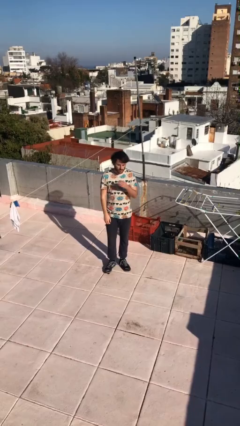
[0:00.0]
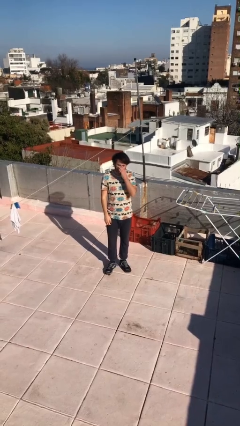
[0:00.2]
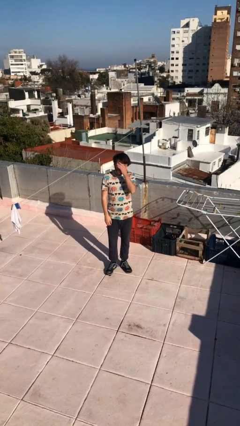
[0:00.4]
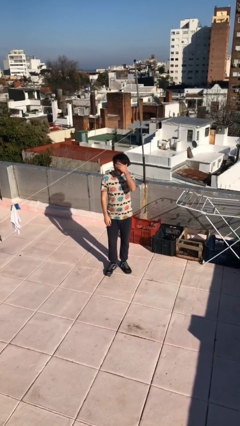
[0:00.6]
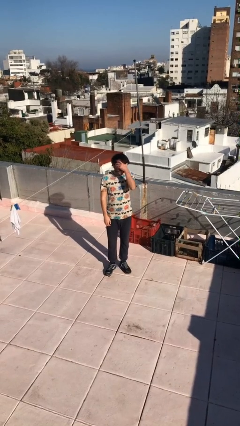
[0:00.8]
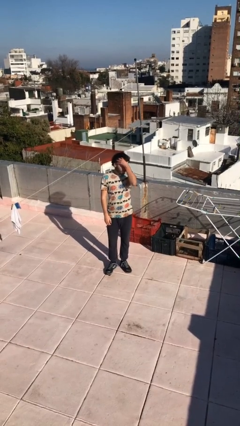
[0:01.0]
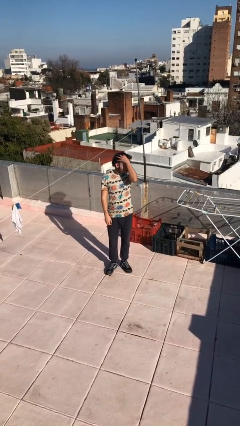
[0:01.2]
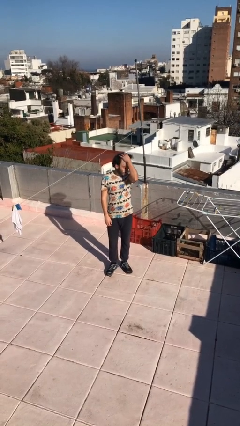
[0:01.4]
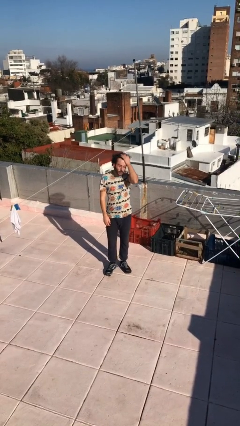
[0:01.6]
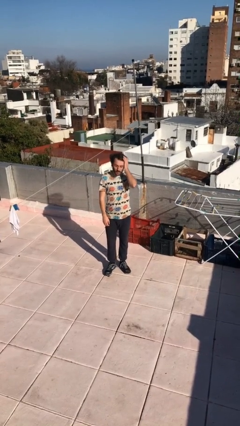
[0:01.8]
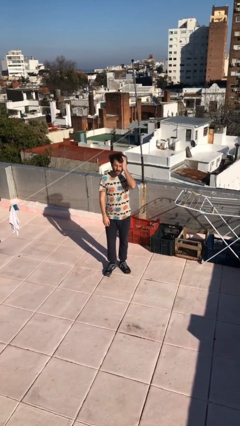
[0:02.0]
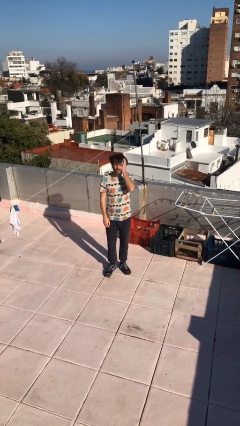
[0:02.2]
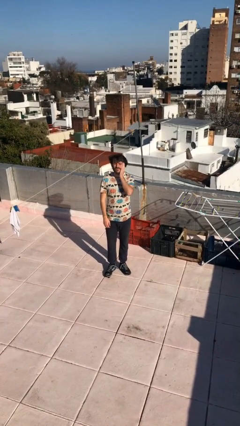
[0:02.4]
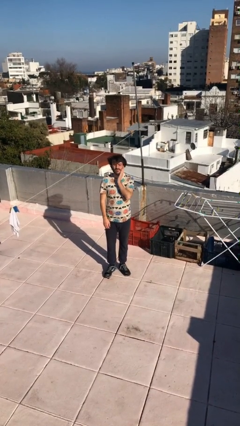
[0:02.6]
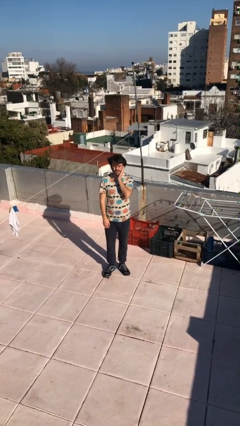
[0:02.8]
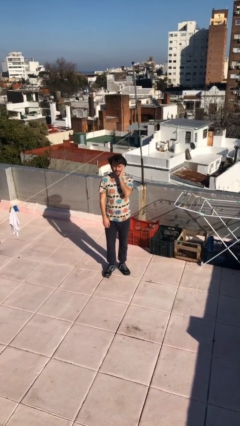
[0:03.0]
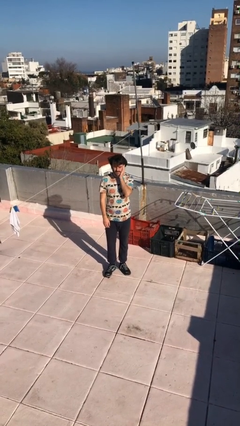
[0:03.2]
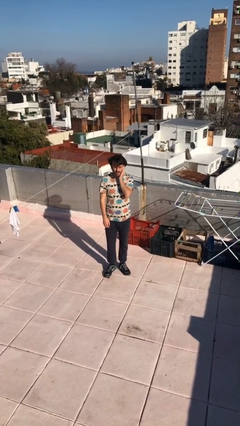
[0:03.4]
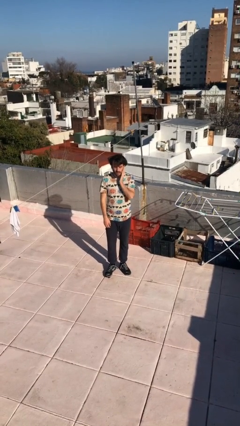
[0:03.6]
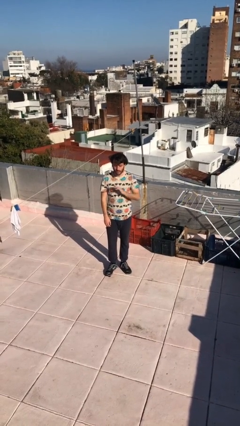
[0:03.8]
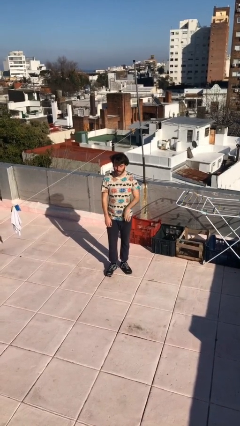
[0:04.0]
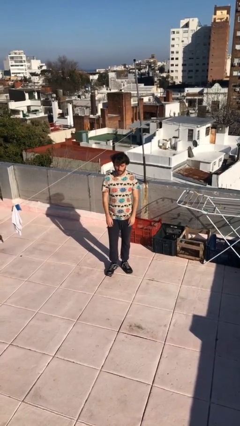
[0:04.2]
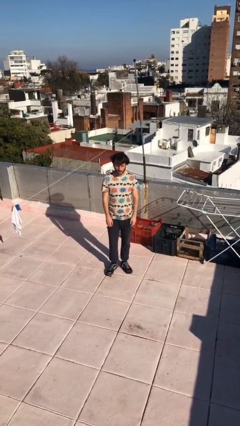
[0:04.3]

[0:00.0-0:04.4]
person scratches face

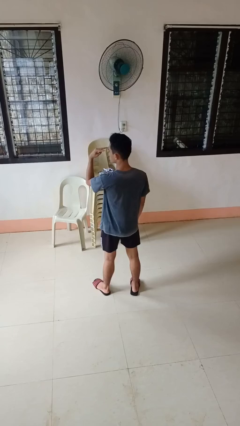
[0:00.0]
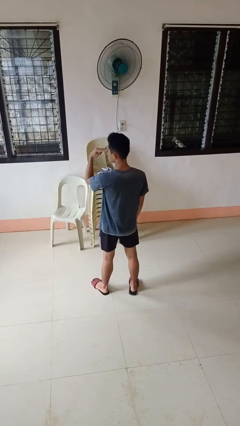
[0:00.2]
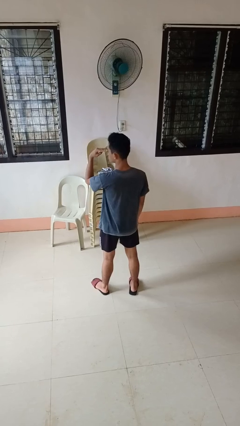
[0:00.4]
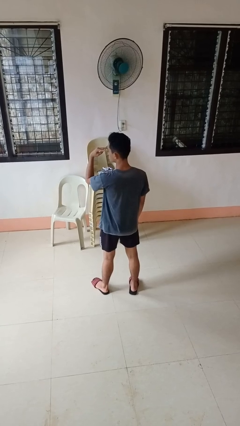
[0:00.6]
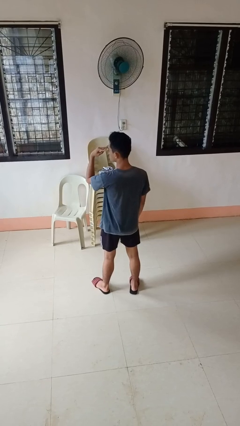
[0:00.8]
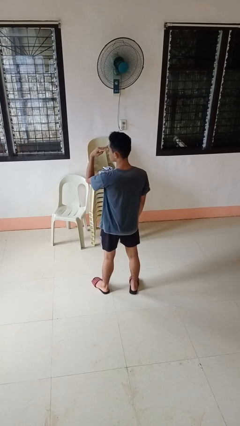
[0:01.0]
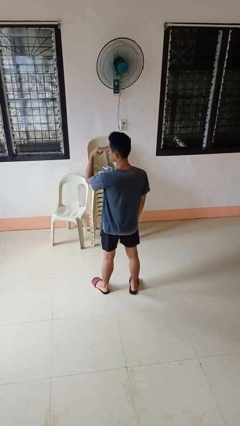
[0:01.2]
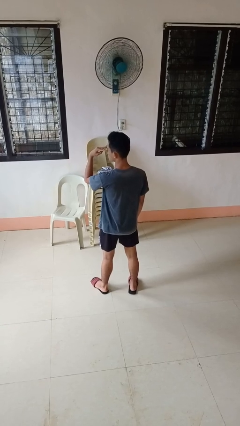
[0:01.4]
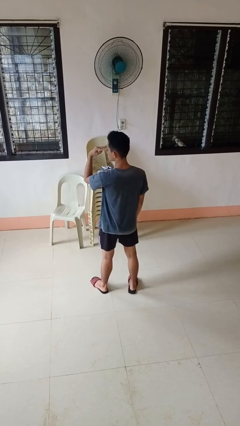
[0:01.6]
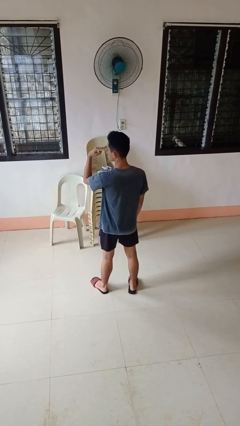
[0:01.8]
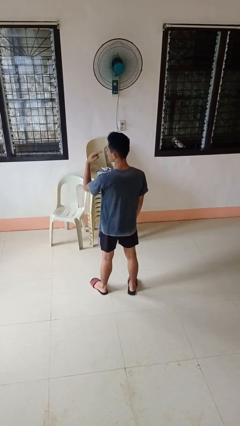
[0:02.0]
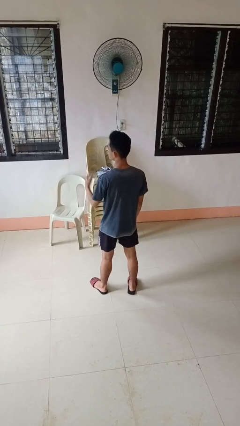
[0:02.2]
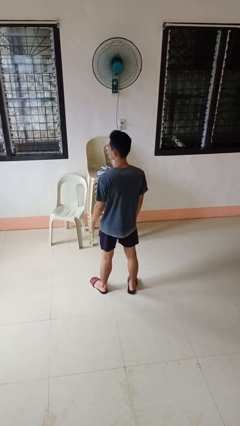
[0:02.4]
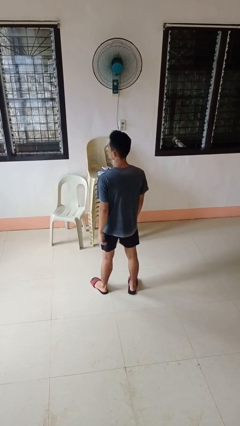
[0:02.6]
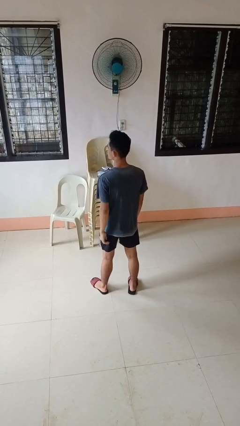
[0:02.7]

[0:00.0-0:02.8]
person gestures watch closely

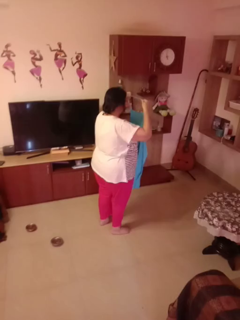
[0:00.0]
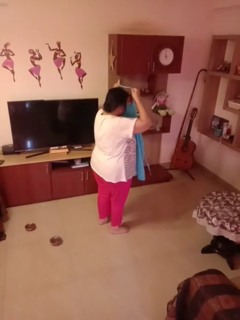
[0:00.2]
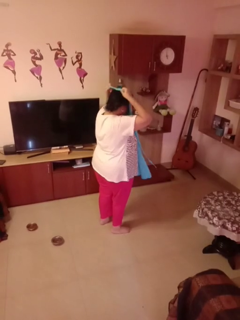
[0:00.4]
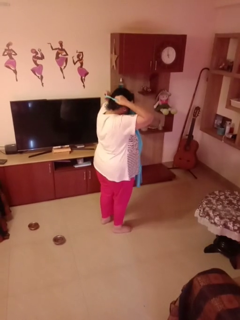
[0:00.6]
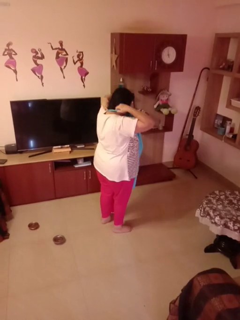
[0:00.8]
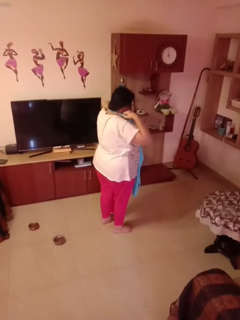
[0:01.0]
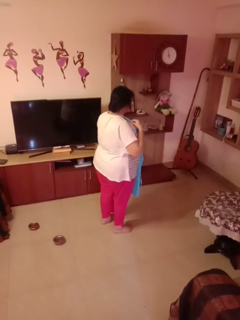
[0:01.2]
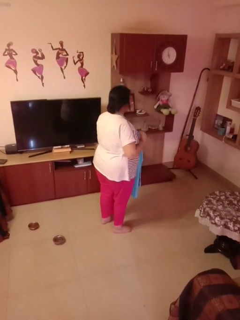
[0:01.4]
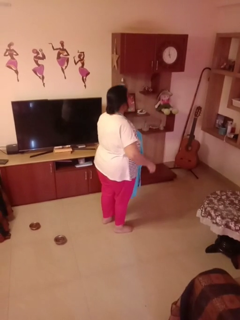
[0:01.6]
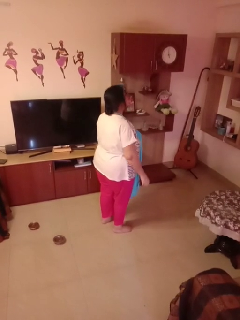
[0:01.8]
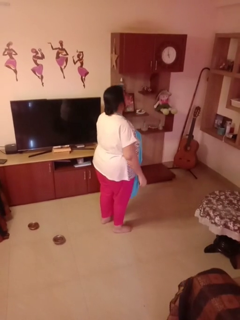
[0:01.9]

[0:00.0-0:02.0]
person puts on apron

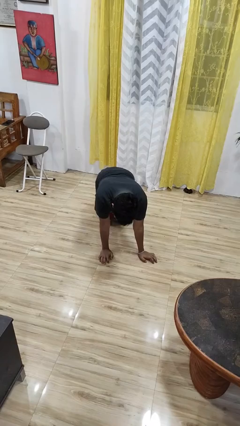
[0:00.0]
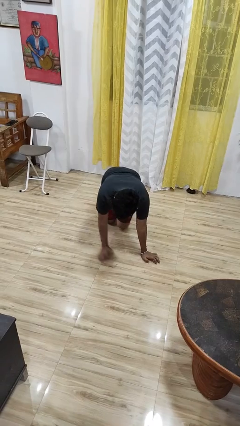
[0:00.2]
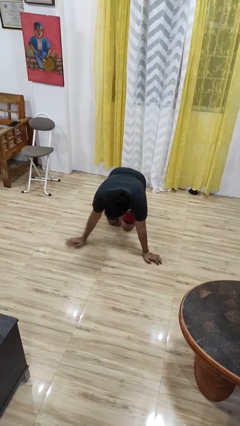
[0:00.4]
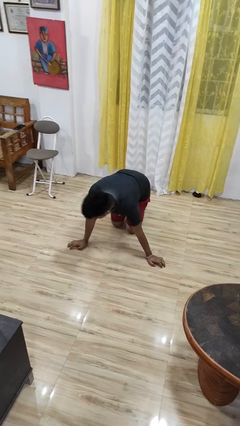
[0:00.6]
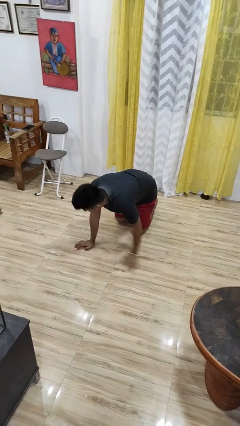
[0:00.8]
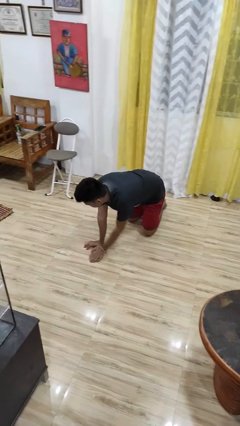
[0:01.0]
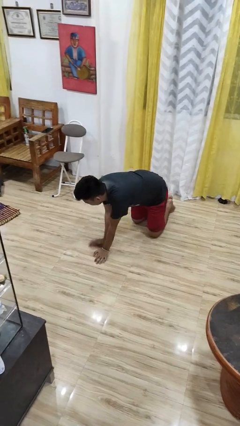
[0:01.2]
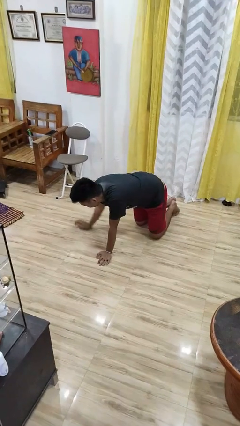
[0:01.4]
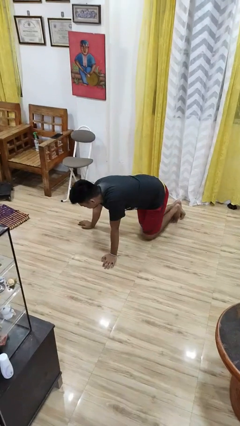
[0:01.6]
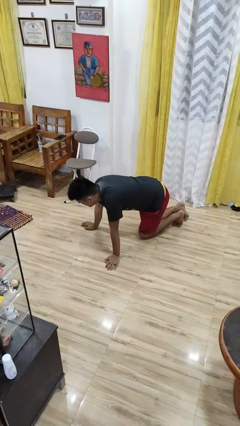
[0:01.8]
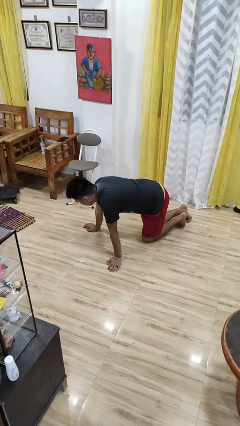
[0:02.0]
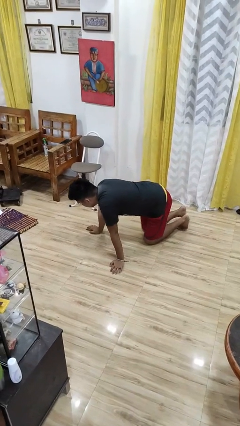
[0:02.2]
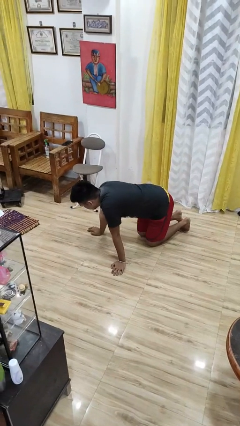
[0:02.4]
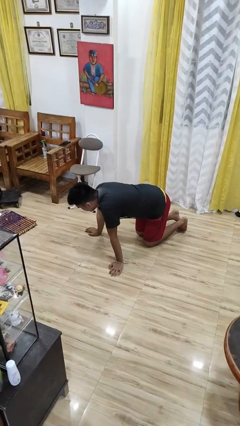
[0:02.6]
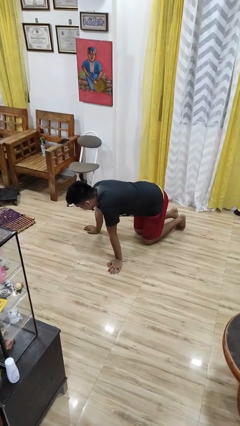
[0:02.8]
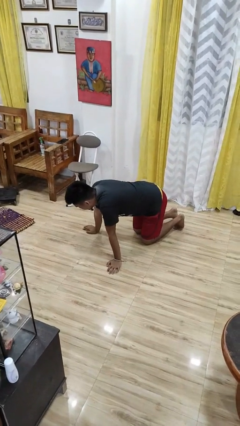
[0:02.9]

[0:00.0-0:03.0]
person crawls

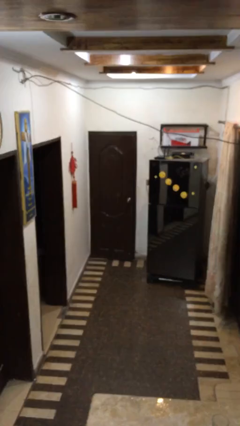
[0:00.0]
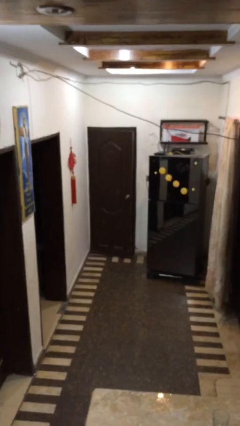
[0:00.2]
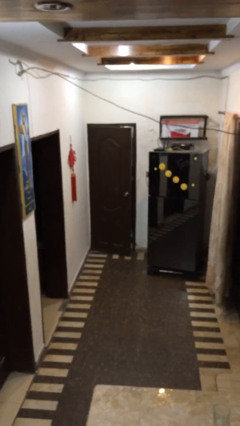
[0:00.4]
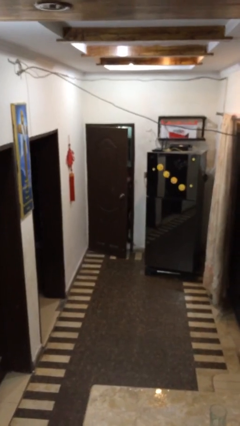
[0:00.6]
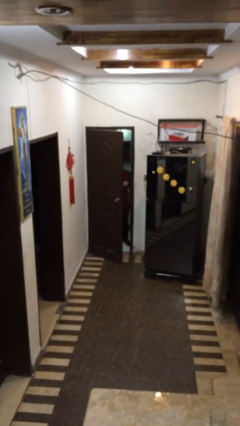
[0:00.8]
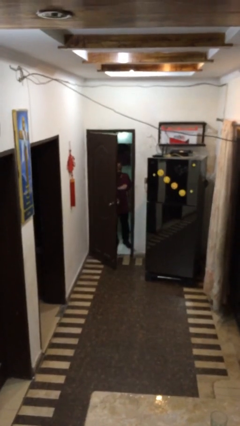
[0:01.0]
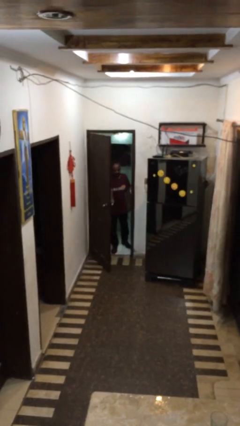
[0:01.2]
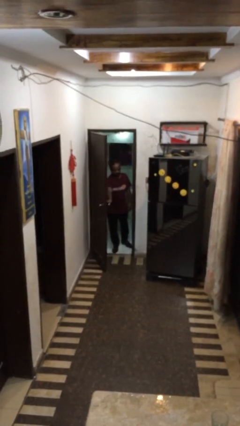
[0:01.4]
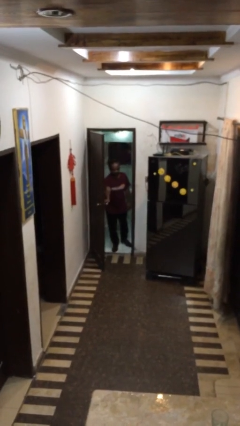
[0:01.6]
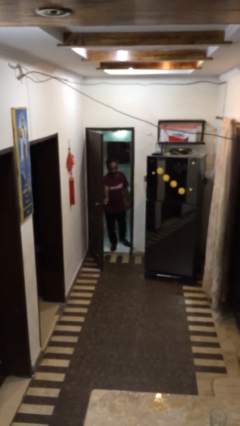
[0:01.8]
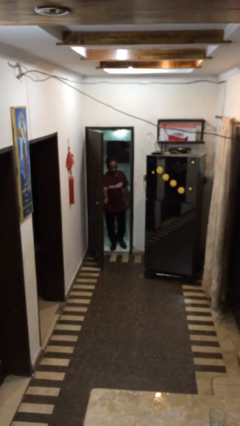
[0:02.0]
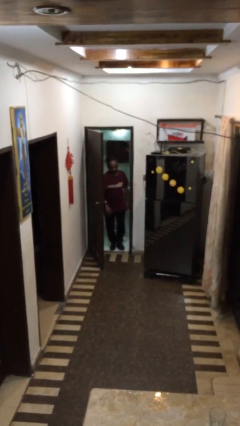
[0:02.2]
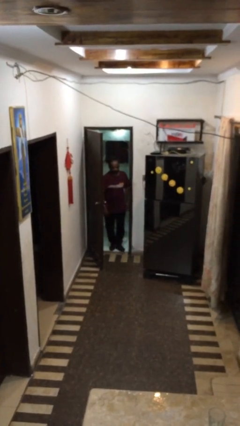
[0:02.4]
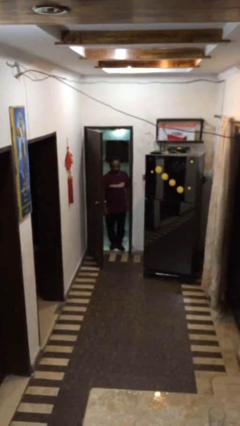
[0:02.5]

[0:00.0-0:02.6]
person opens facility door

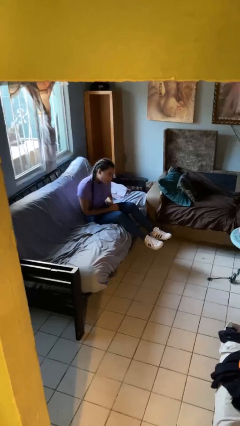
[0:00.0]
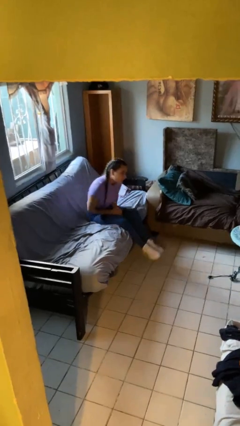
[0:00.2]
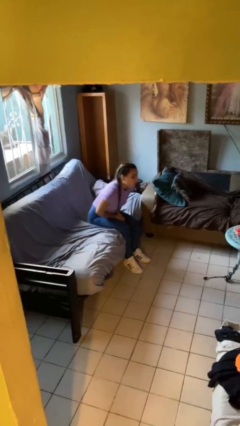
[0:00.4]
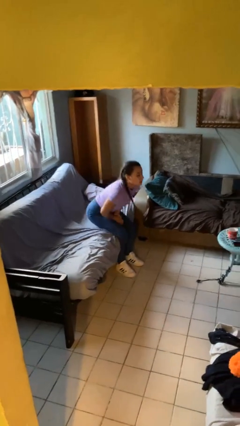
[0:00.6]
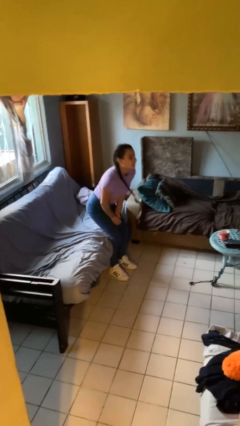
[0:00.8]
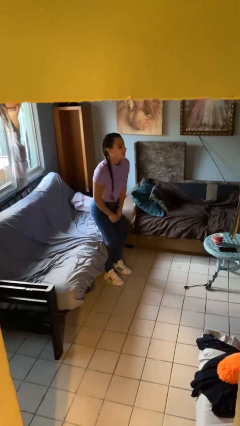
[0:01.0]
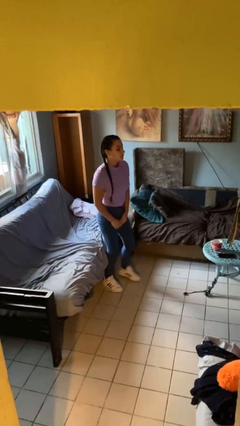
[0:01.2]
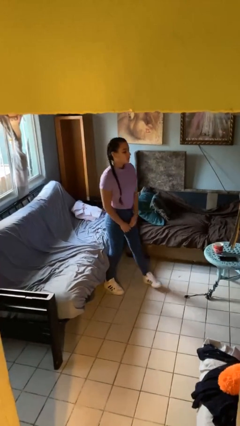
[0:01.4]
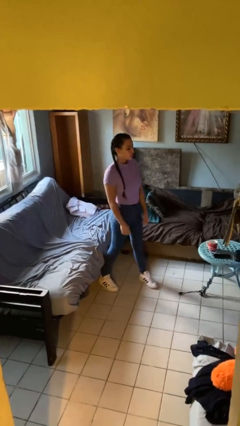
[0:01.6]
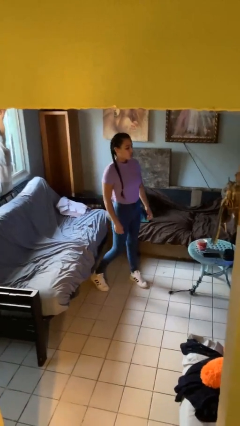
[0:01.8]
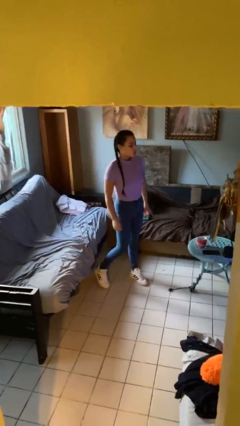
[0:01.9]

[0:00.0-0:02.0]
person stands up

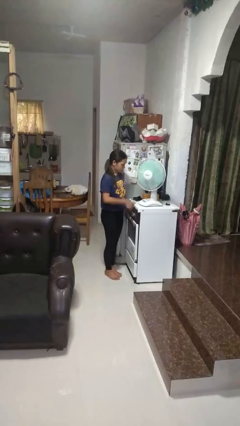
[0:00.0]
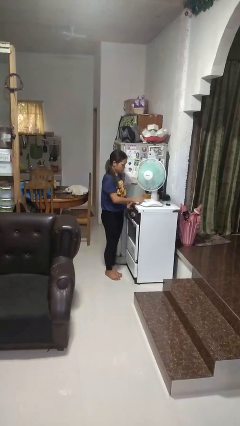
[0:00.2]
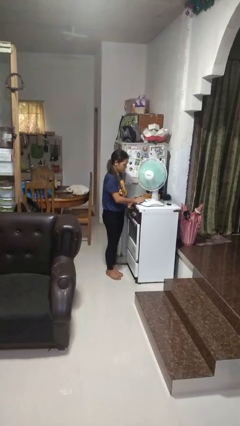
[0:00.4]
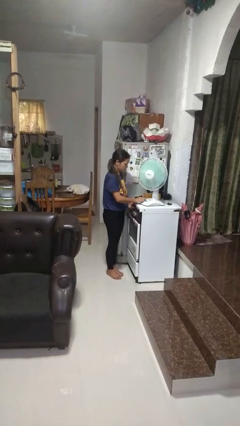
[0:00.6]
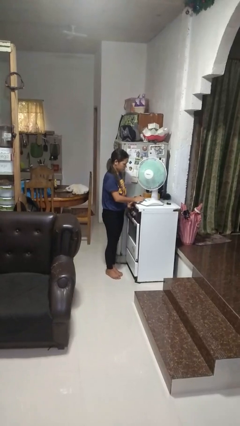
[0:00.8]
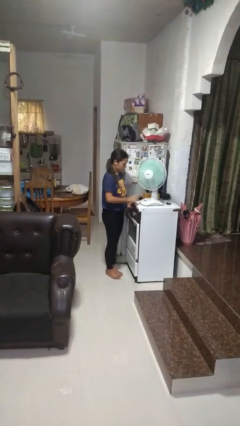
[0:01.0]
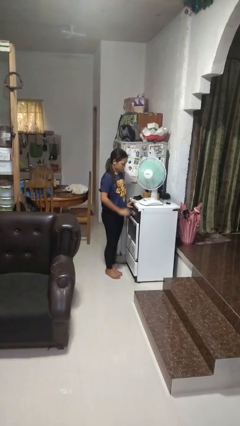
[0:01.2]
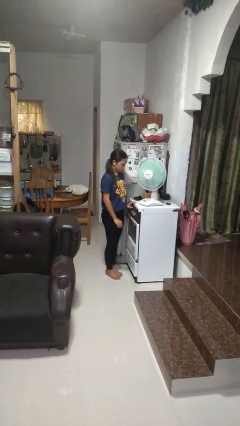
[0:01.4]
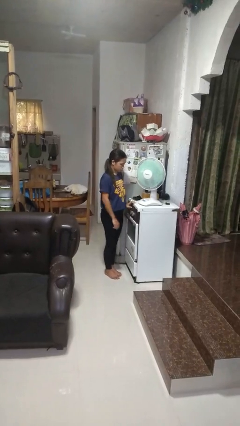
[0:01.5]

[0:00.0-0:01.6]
person turns off fan
